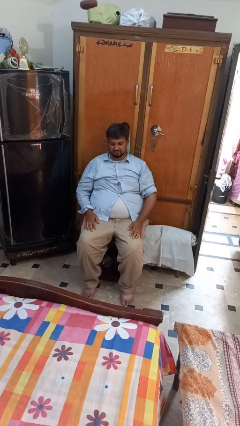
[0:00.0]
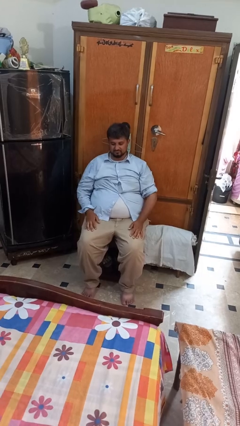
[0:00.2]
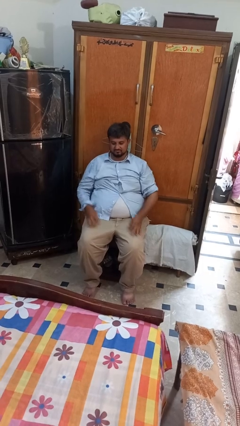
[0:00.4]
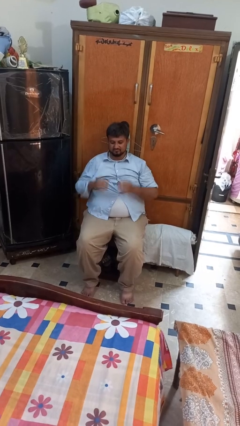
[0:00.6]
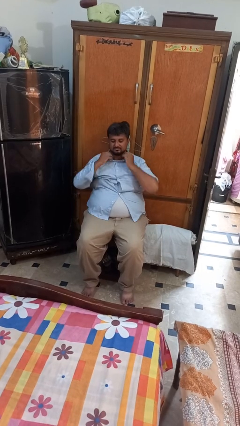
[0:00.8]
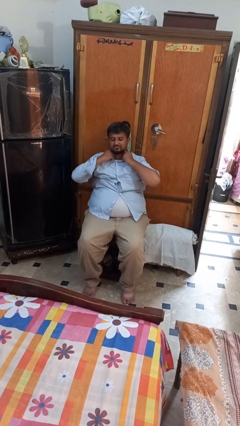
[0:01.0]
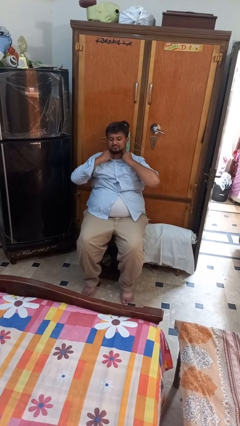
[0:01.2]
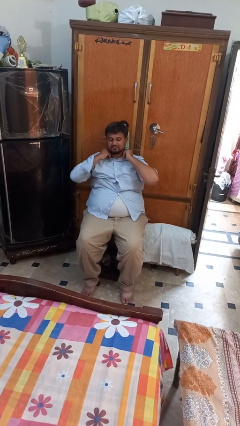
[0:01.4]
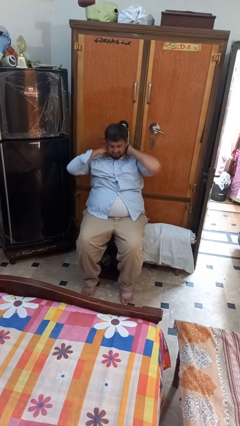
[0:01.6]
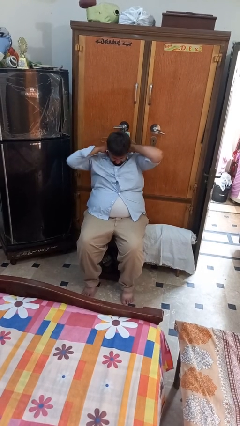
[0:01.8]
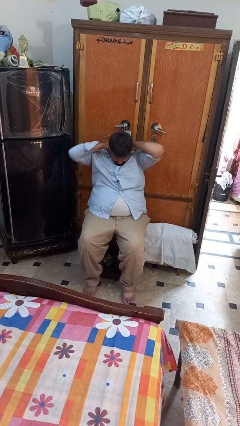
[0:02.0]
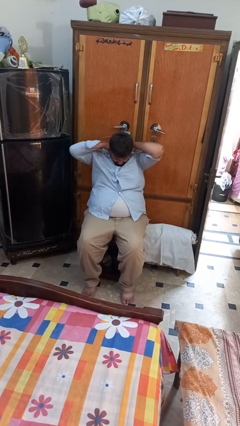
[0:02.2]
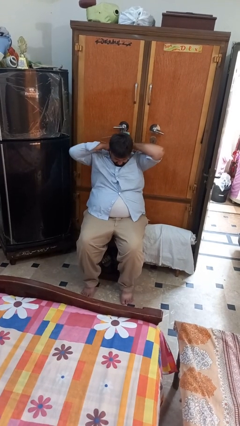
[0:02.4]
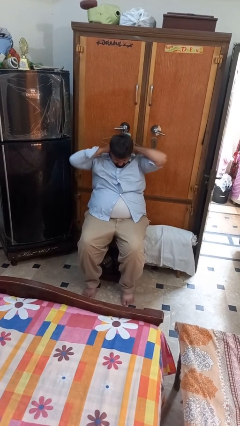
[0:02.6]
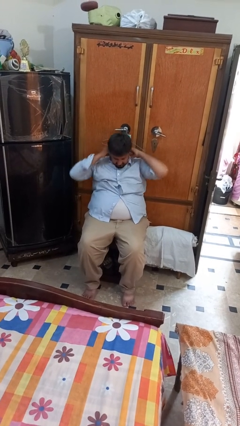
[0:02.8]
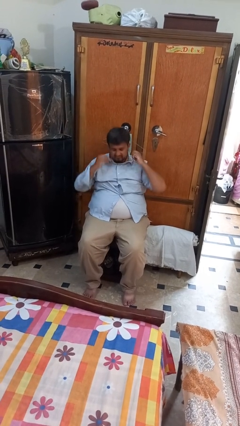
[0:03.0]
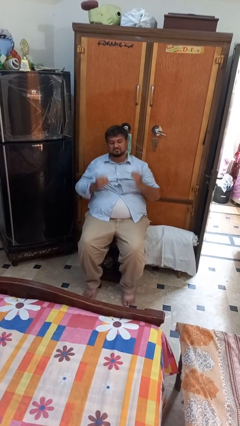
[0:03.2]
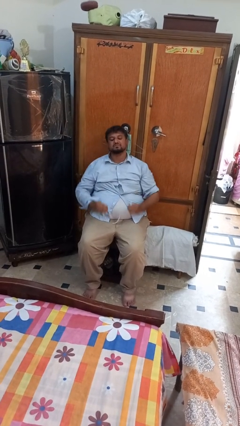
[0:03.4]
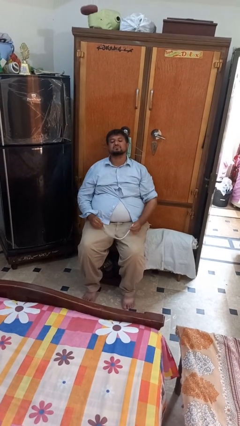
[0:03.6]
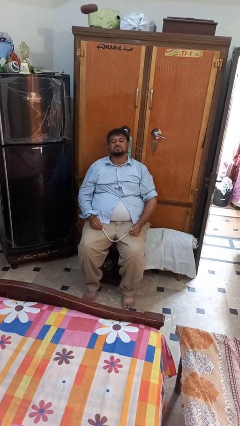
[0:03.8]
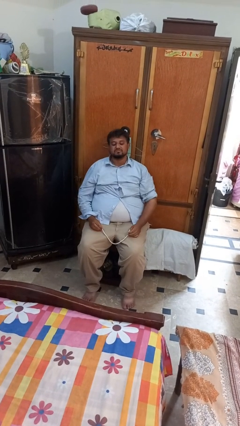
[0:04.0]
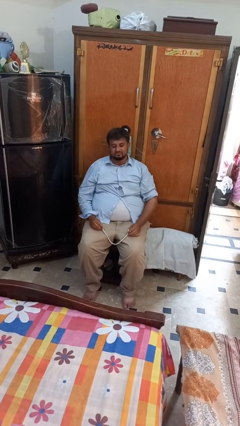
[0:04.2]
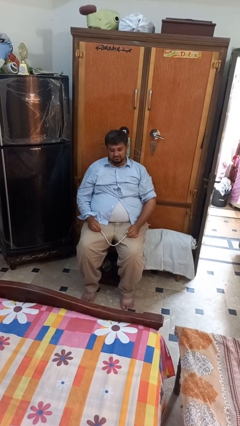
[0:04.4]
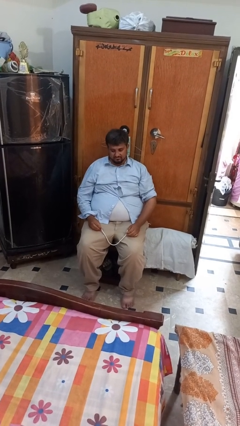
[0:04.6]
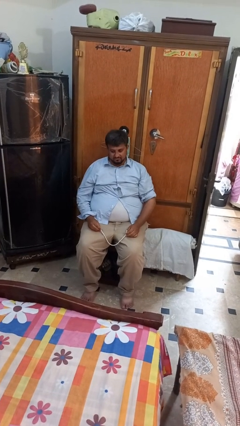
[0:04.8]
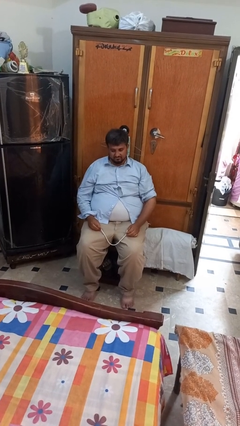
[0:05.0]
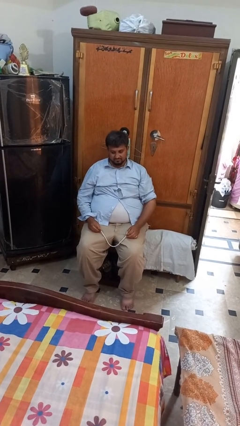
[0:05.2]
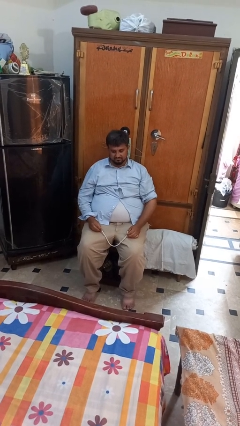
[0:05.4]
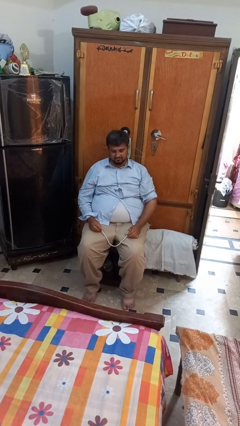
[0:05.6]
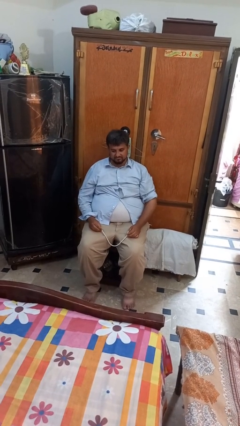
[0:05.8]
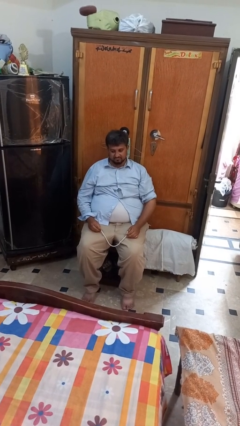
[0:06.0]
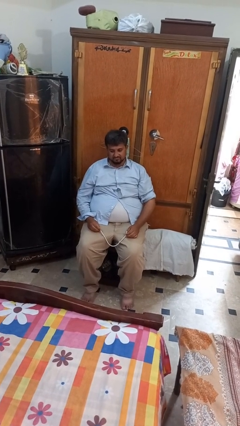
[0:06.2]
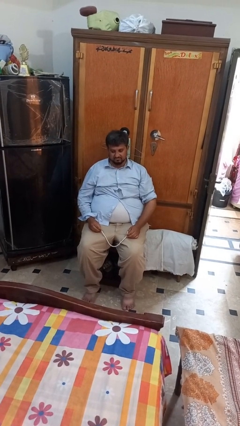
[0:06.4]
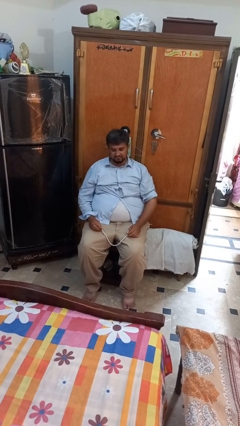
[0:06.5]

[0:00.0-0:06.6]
person takes off necklace

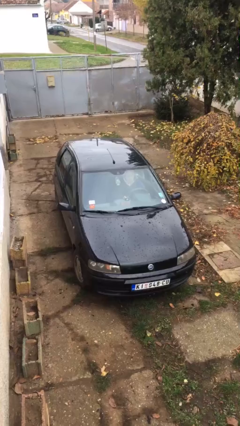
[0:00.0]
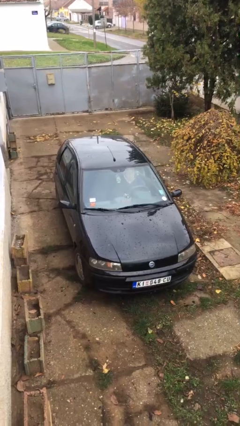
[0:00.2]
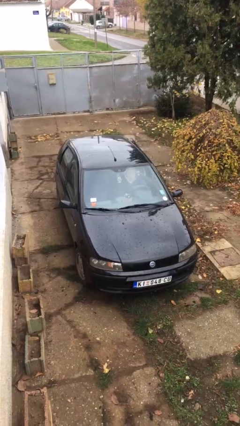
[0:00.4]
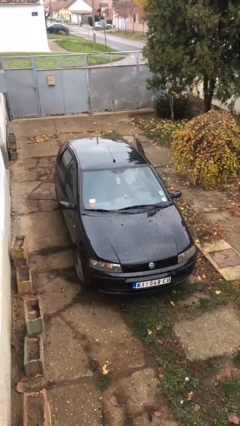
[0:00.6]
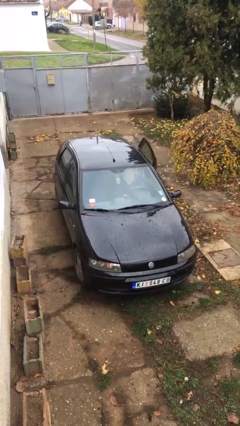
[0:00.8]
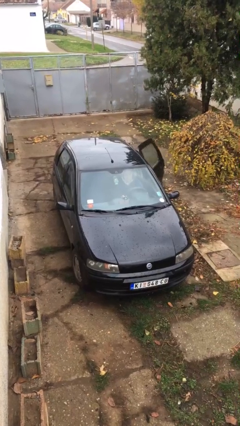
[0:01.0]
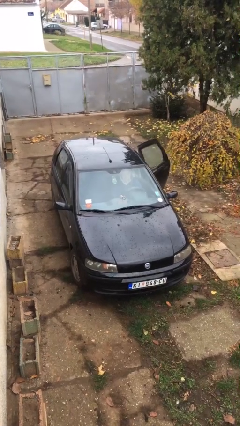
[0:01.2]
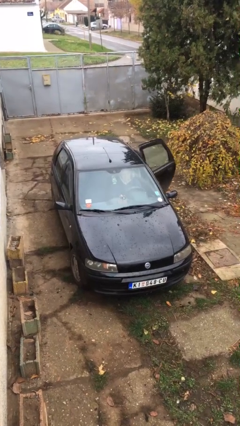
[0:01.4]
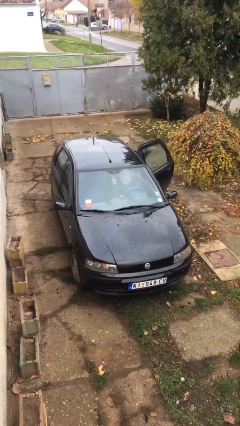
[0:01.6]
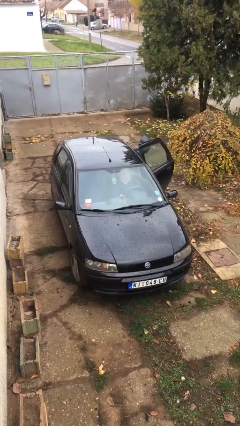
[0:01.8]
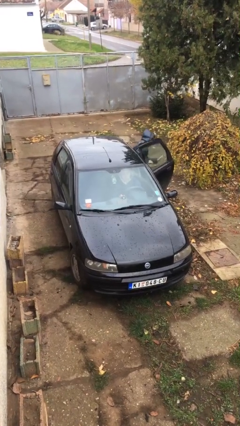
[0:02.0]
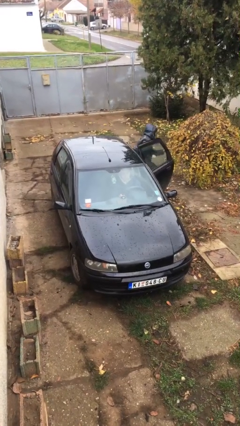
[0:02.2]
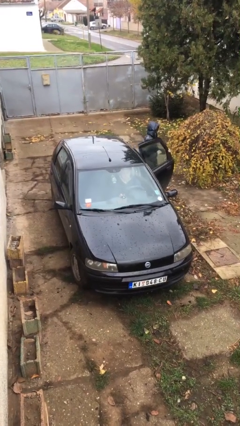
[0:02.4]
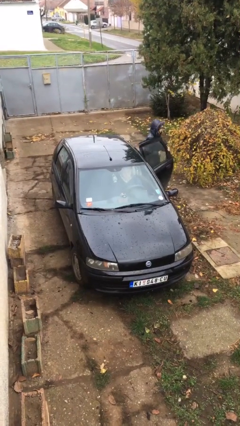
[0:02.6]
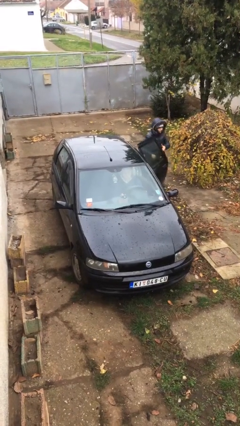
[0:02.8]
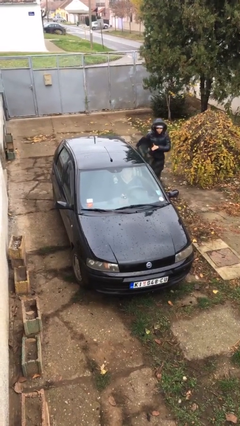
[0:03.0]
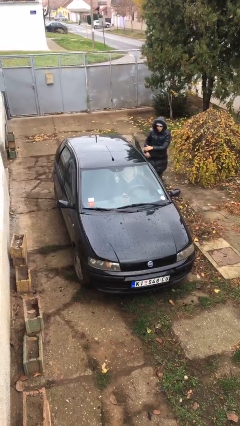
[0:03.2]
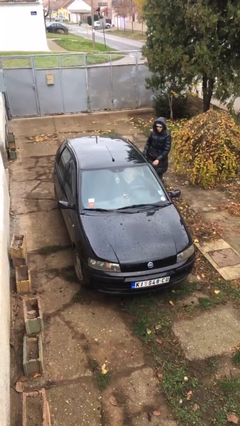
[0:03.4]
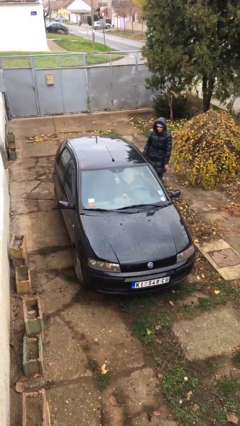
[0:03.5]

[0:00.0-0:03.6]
car drops off person

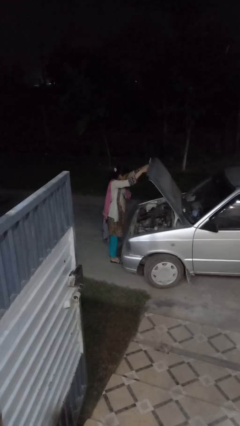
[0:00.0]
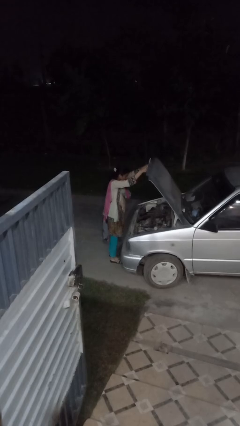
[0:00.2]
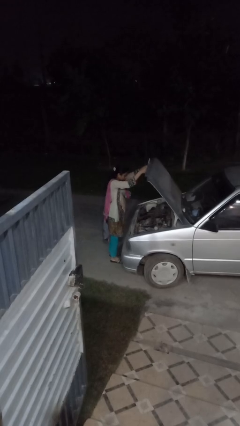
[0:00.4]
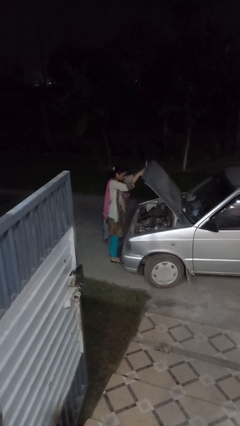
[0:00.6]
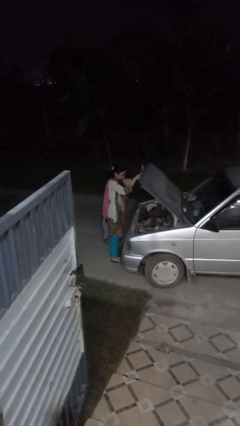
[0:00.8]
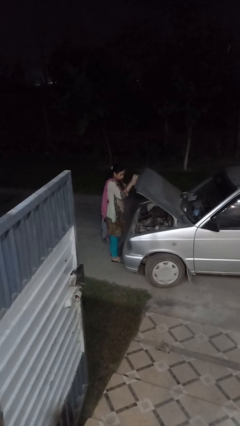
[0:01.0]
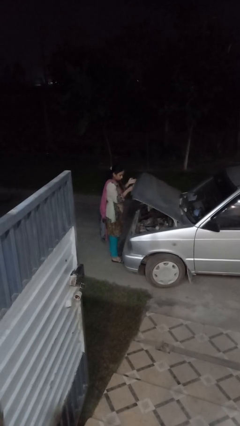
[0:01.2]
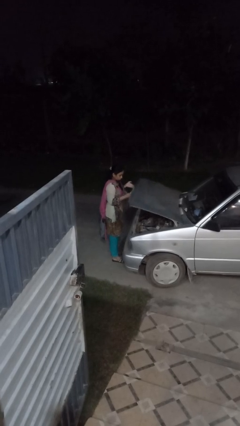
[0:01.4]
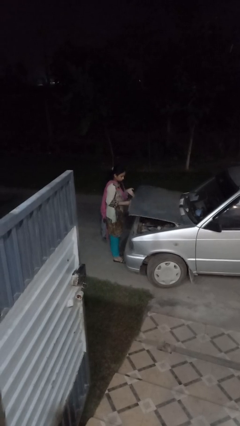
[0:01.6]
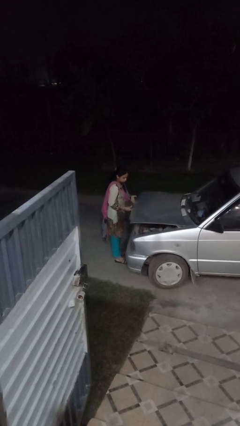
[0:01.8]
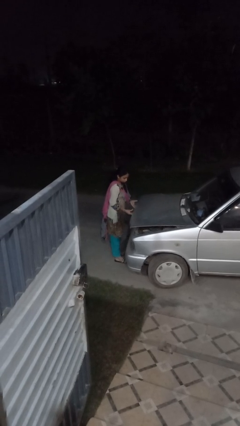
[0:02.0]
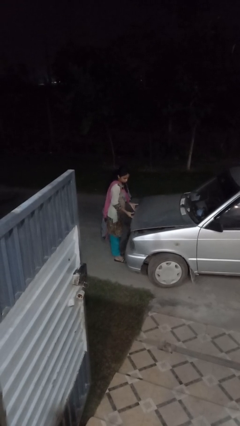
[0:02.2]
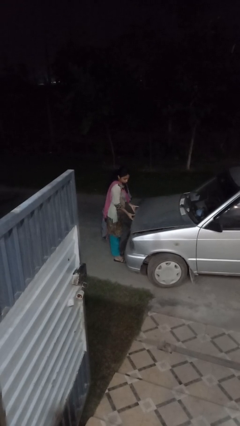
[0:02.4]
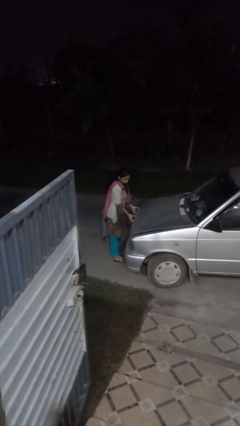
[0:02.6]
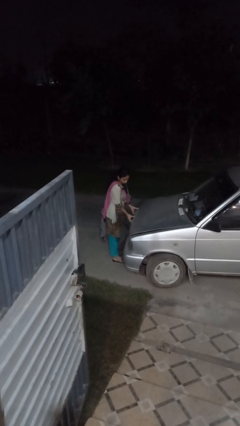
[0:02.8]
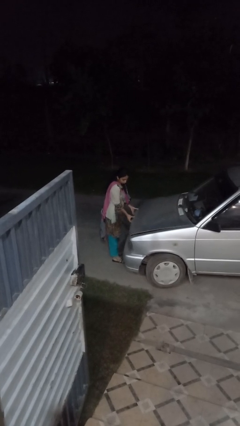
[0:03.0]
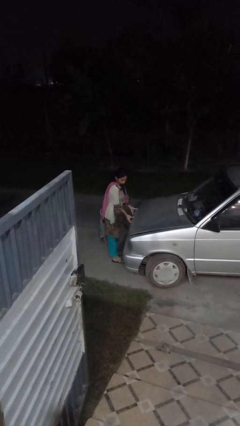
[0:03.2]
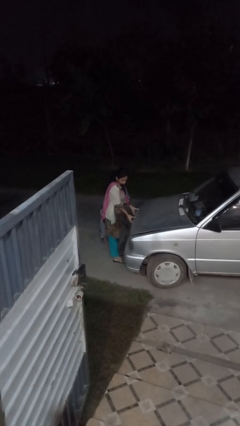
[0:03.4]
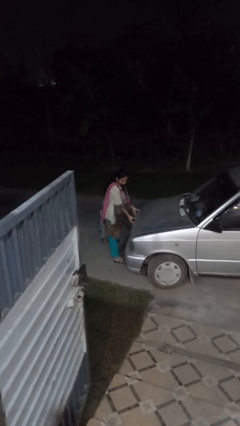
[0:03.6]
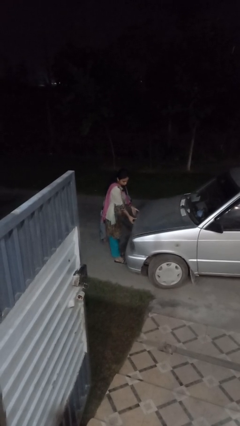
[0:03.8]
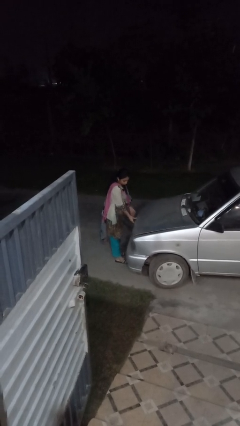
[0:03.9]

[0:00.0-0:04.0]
person closes car hood

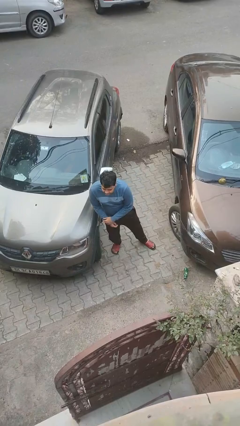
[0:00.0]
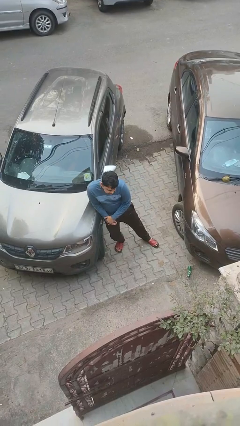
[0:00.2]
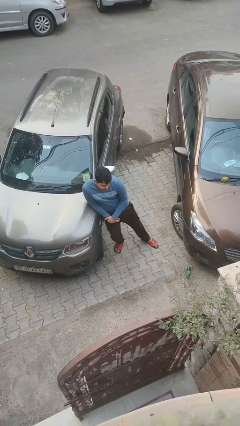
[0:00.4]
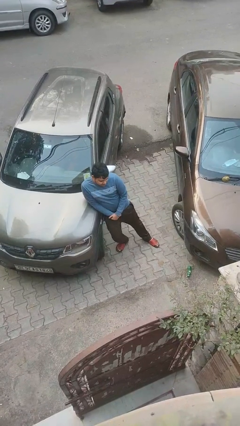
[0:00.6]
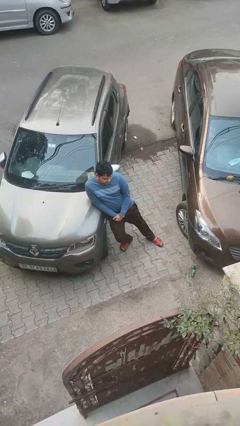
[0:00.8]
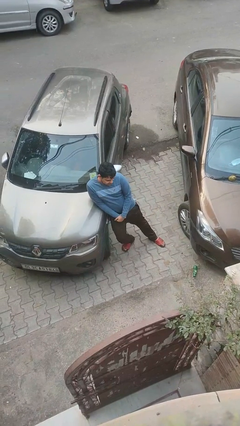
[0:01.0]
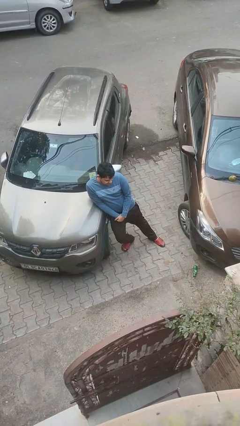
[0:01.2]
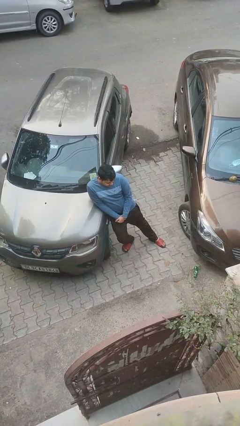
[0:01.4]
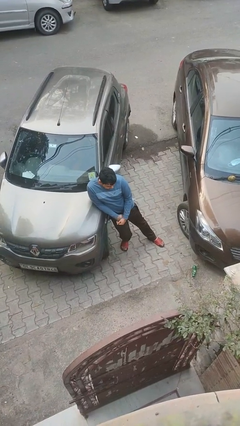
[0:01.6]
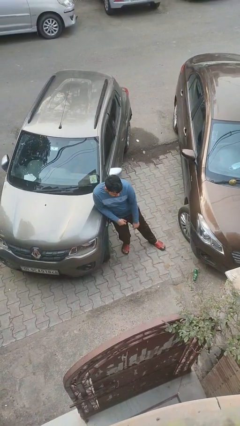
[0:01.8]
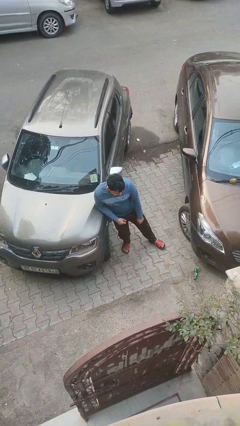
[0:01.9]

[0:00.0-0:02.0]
person leans against car

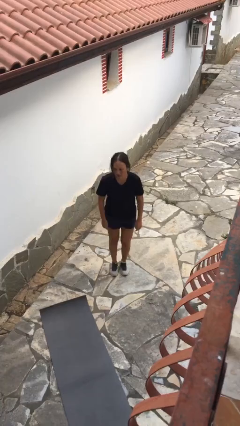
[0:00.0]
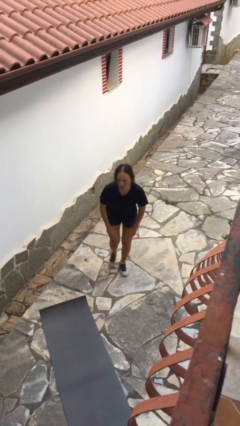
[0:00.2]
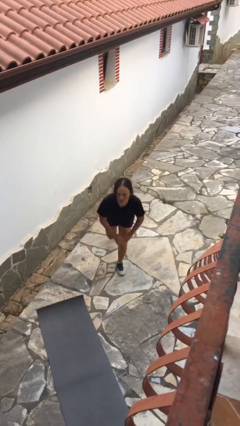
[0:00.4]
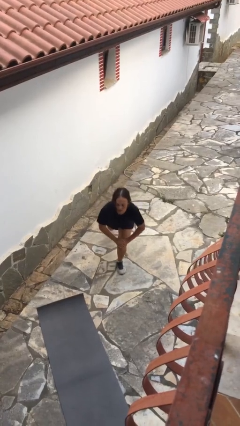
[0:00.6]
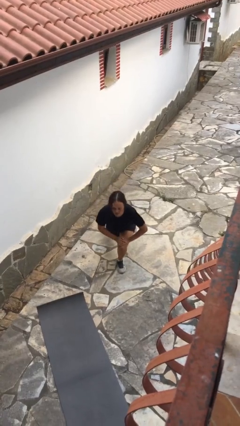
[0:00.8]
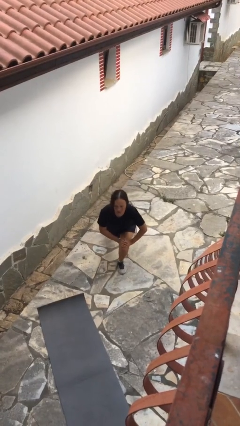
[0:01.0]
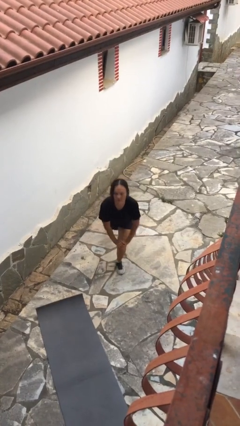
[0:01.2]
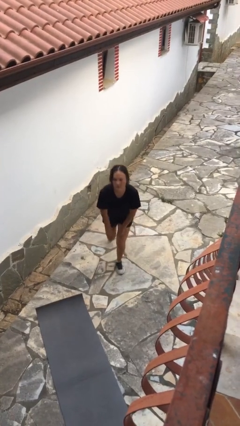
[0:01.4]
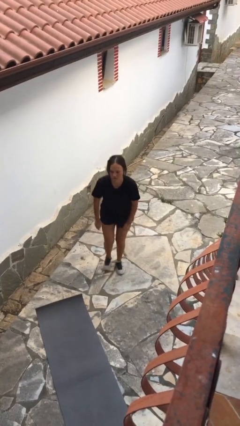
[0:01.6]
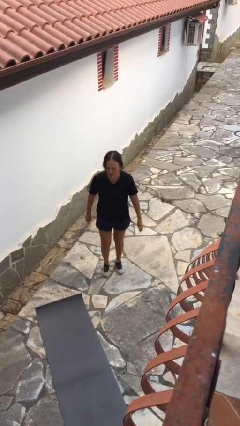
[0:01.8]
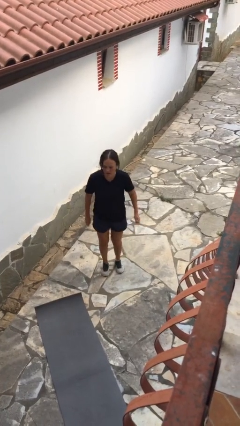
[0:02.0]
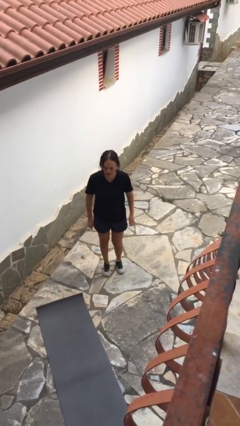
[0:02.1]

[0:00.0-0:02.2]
person exercises with lunges
